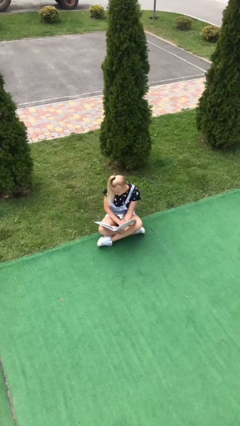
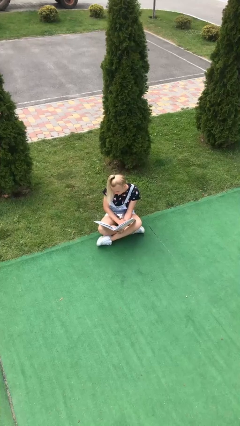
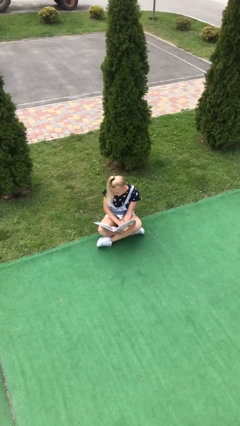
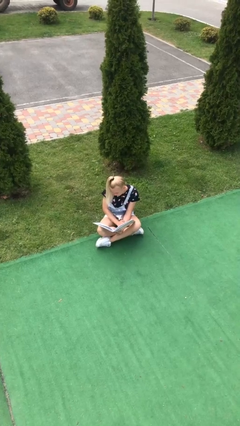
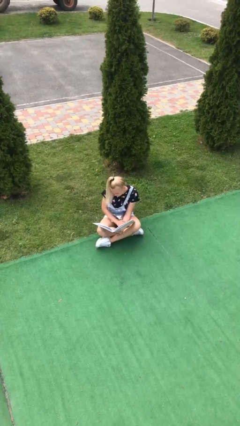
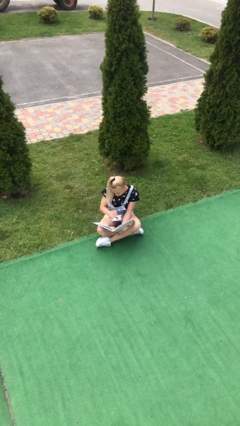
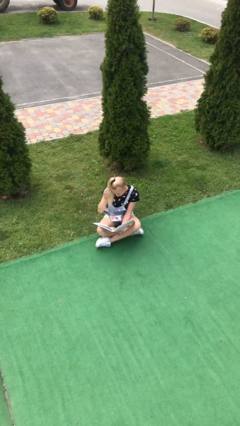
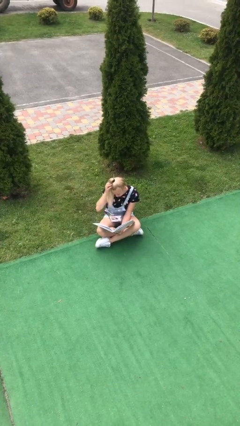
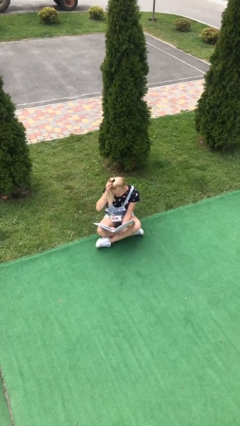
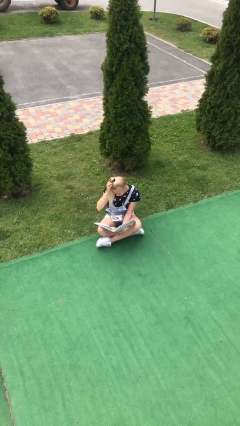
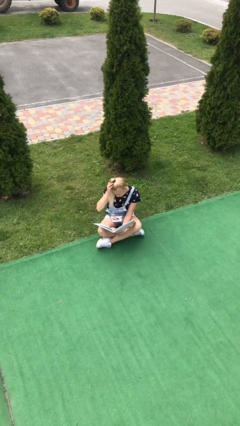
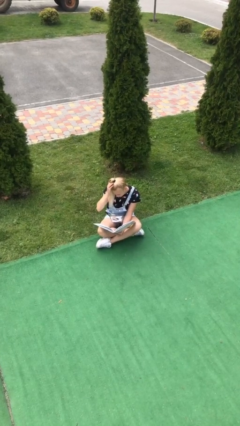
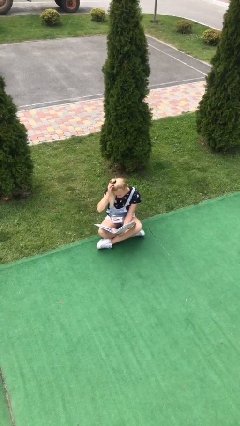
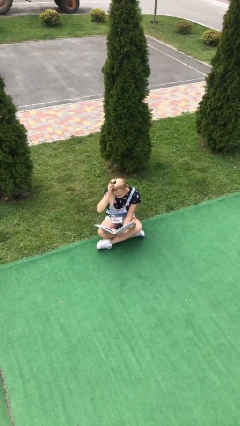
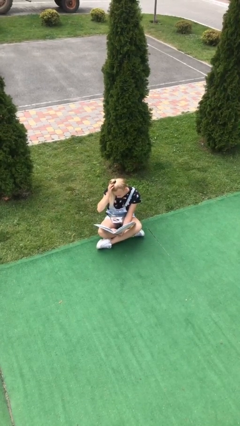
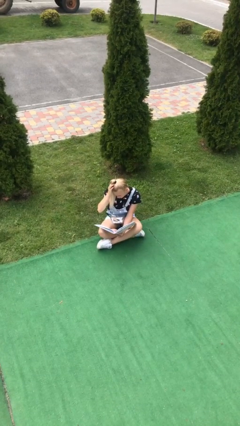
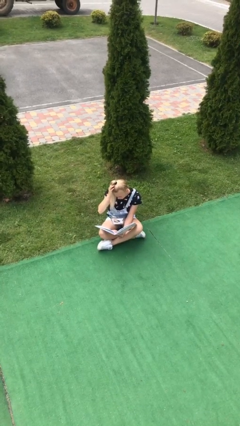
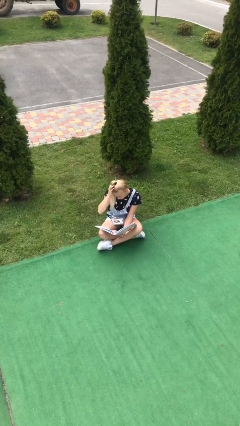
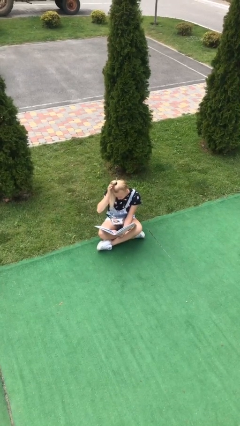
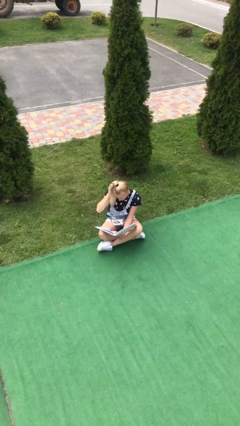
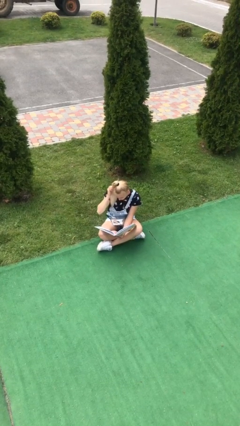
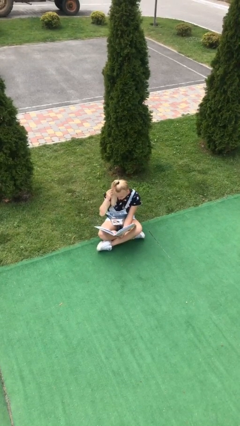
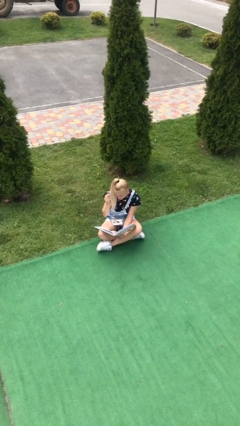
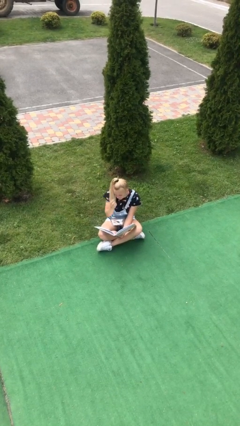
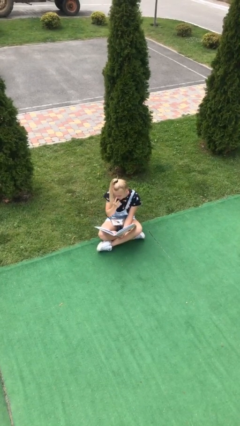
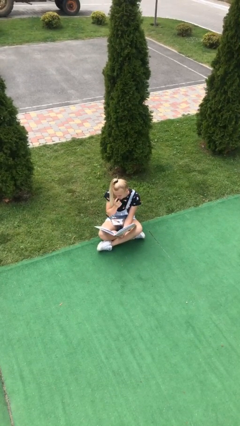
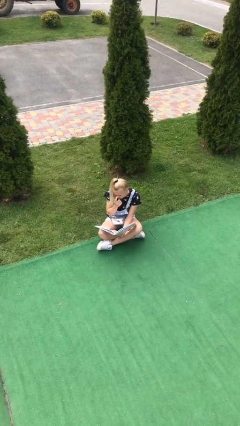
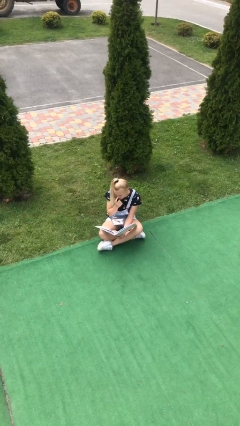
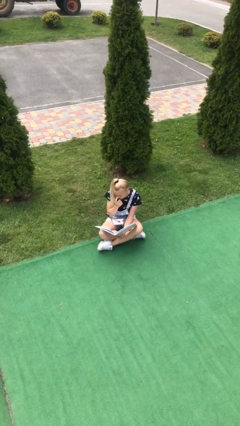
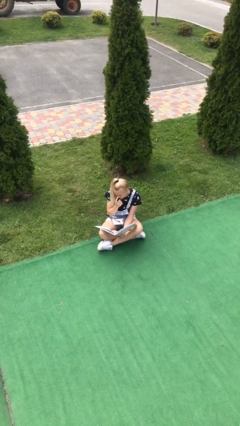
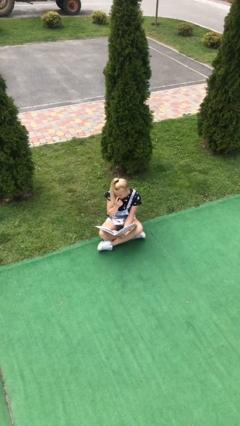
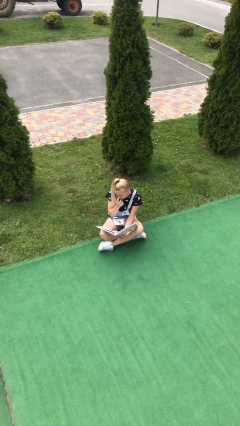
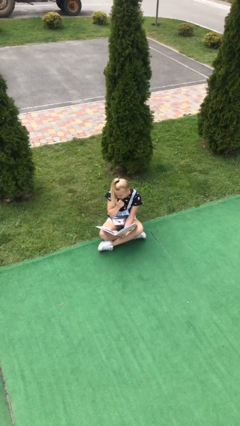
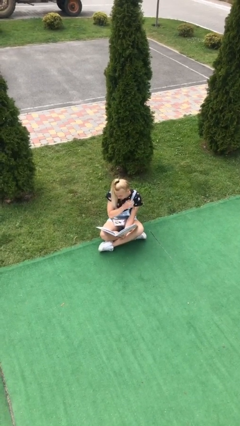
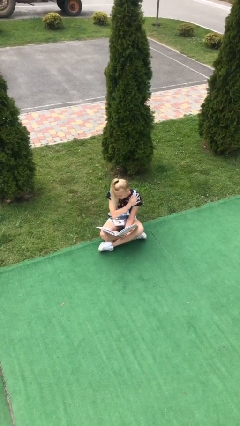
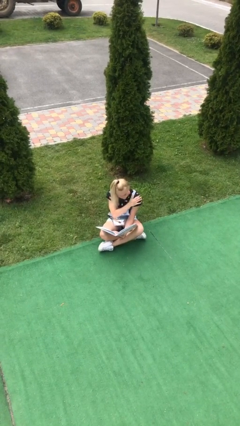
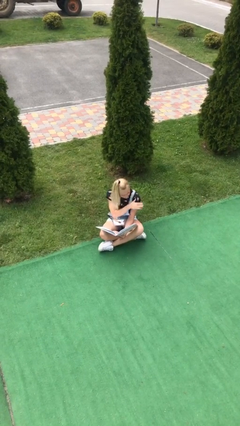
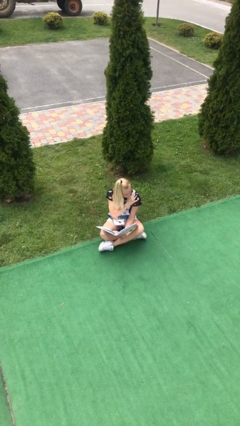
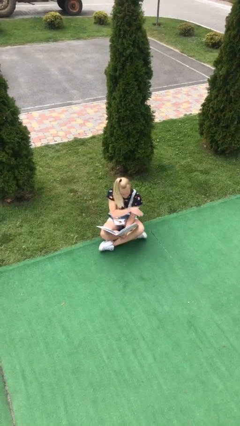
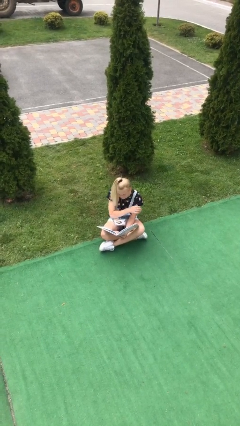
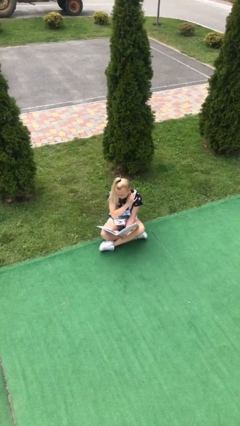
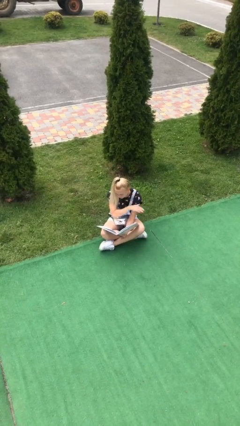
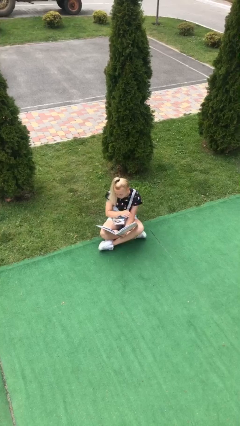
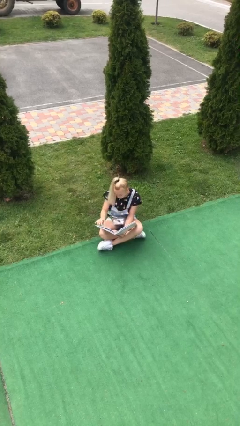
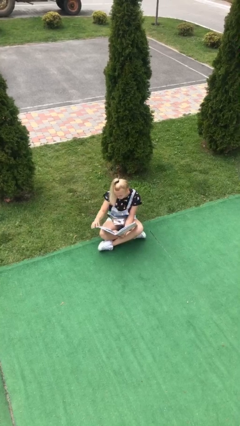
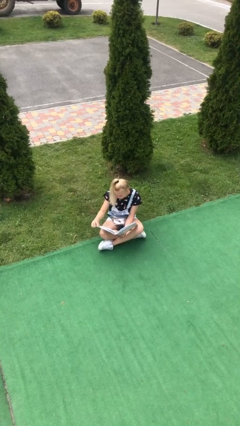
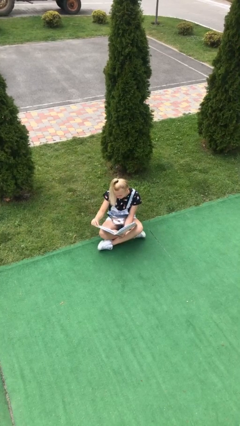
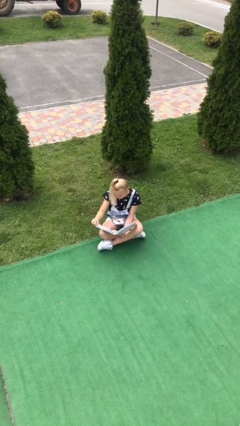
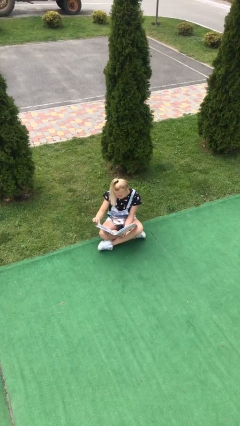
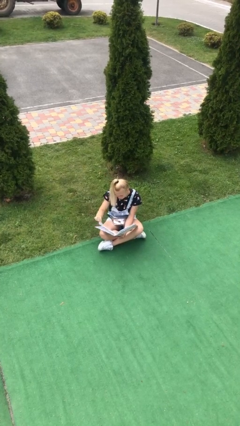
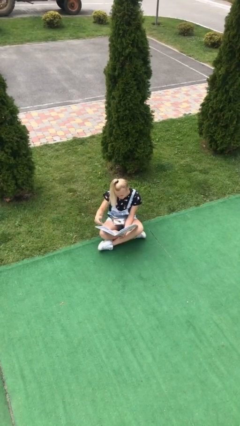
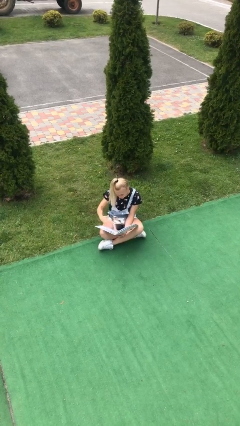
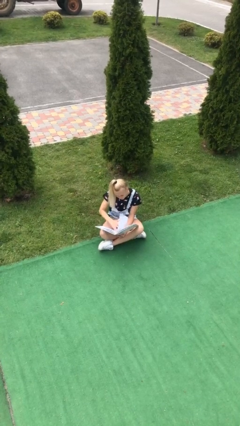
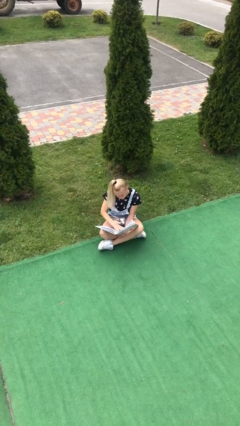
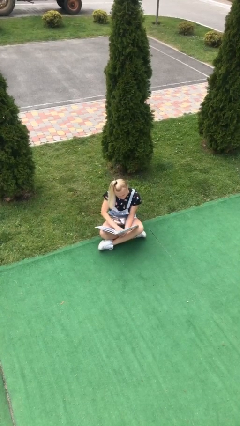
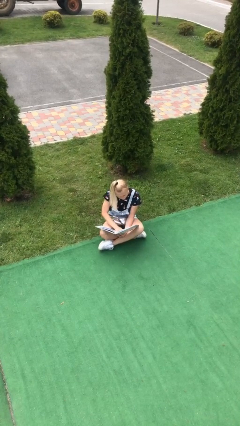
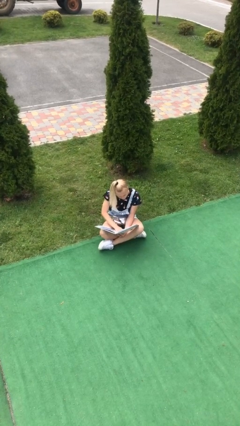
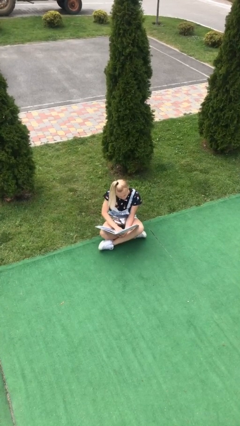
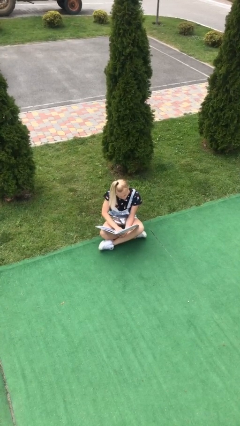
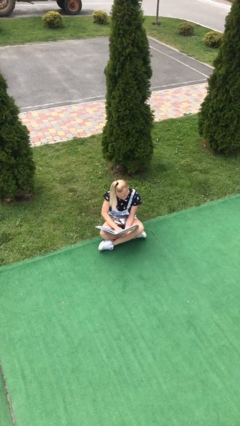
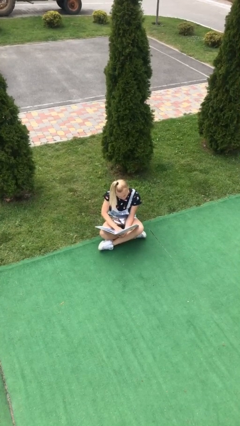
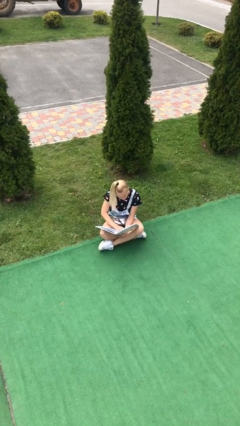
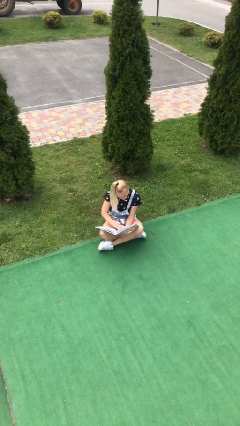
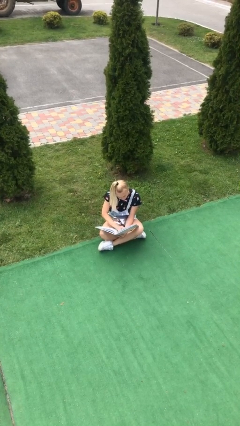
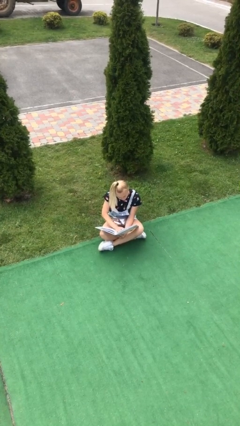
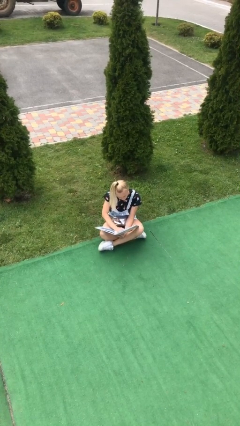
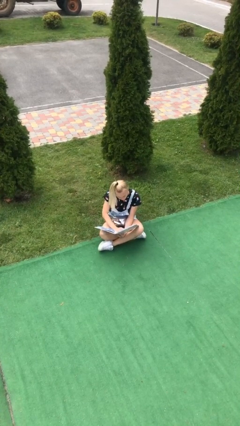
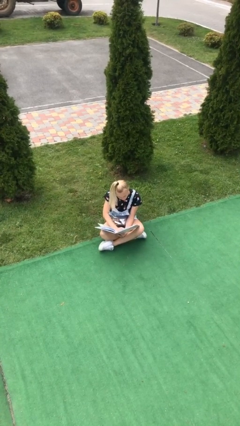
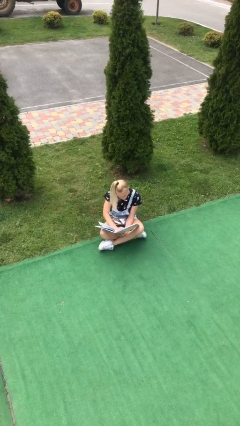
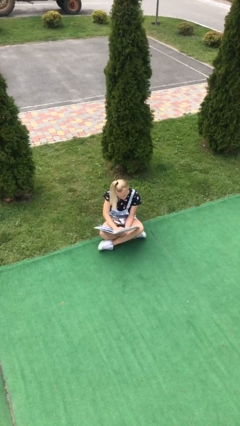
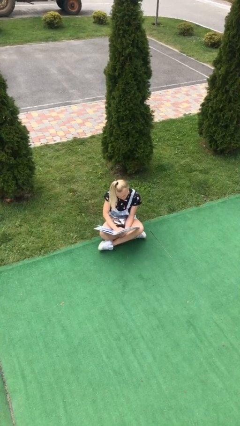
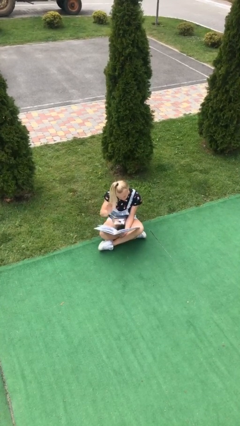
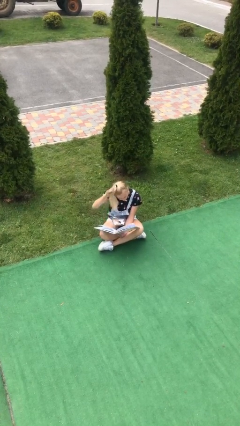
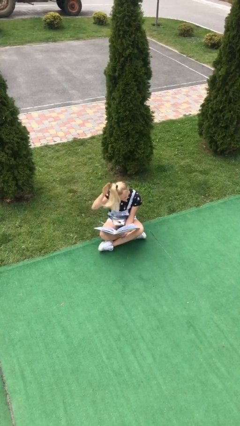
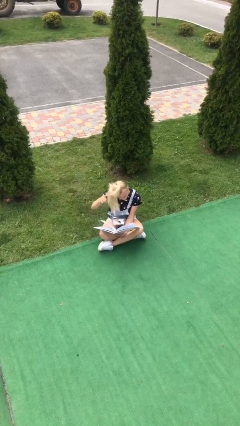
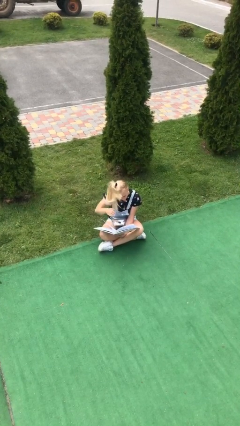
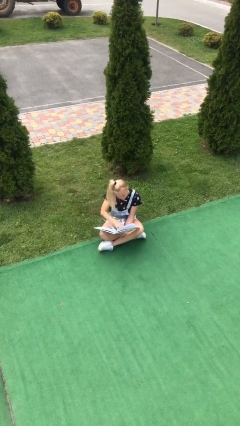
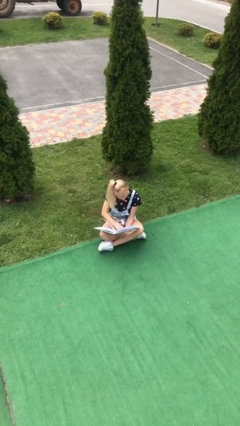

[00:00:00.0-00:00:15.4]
person reads document

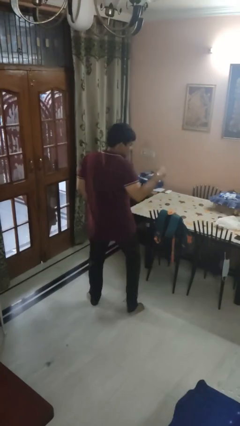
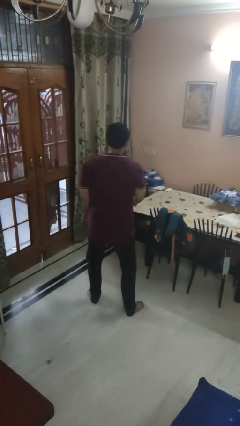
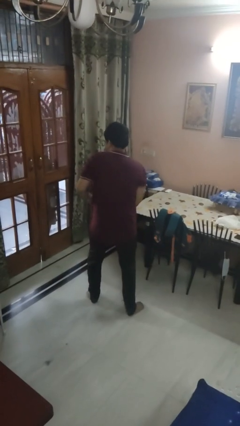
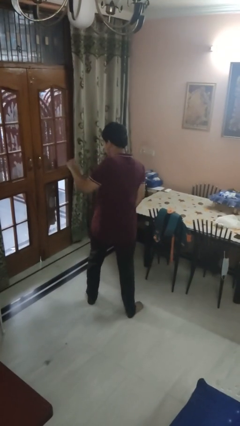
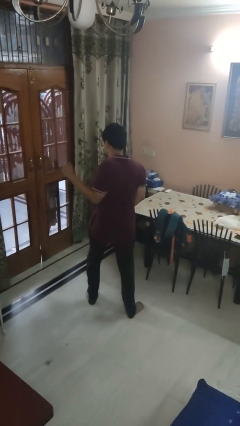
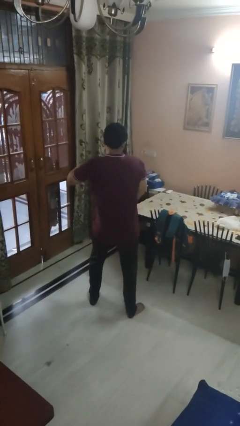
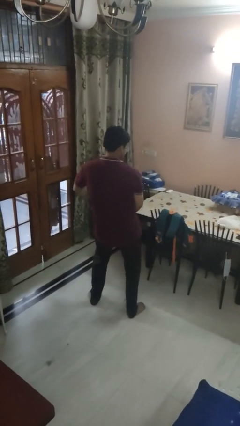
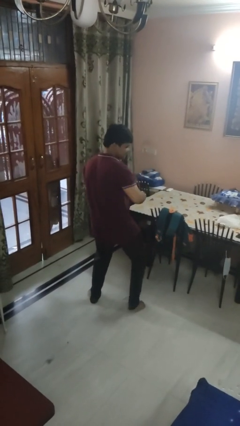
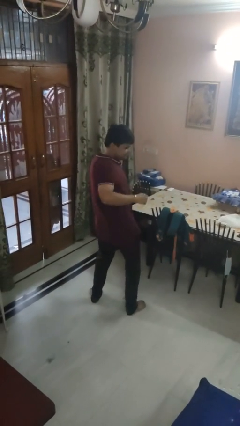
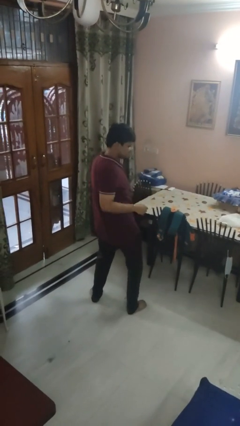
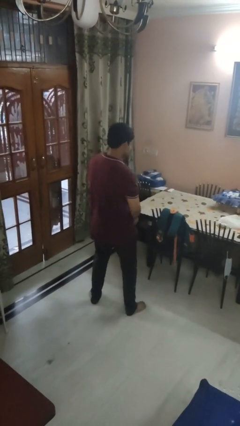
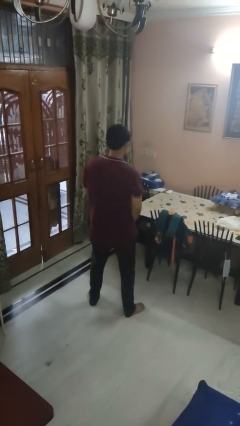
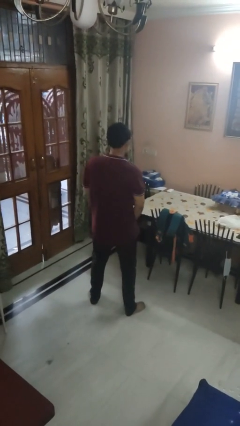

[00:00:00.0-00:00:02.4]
person dances in place
